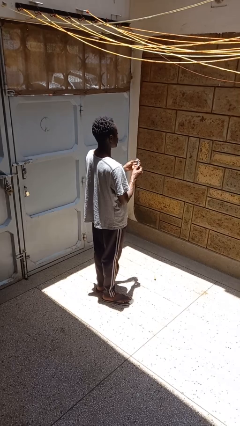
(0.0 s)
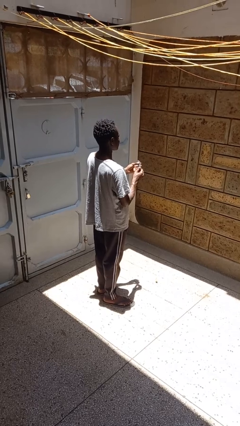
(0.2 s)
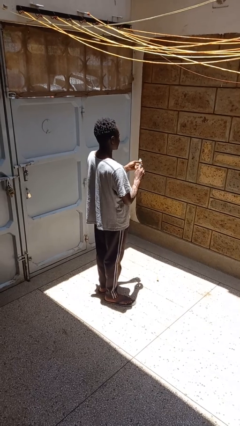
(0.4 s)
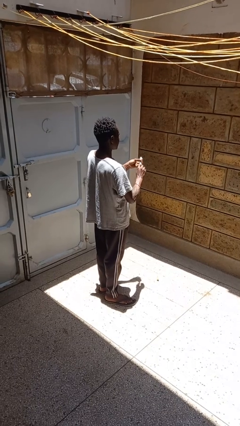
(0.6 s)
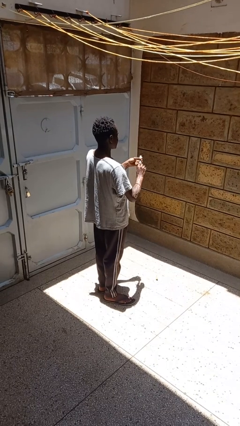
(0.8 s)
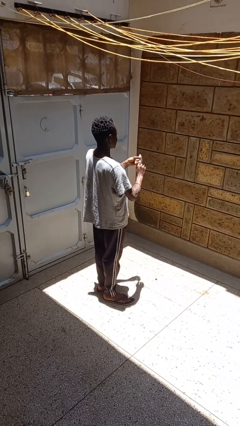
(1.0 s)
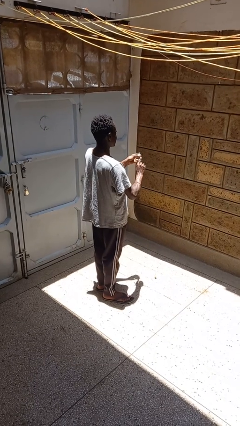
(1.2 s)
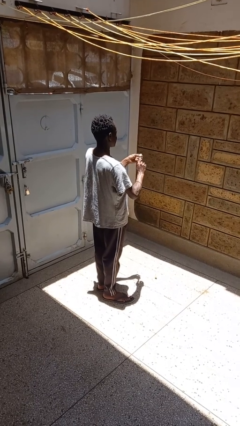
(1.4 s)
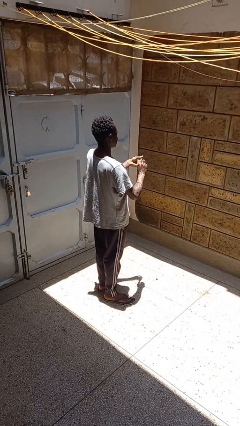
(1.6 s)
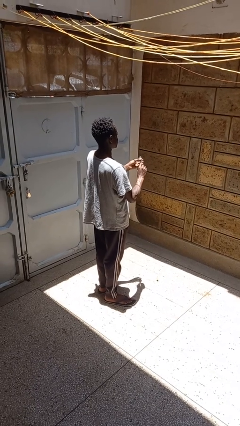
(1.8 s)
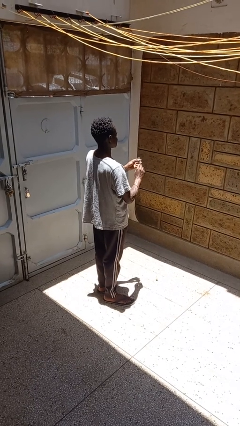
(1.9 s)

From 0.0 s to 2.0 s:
person clips fingernails

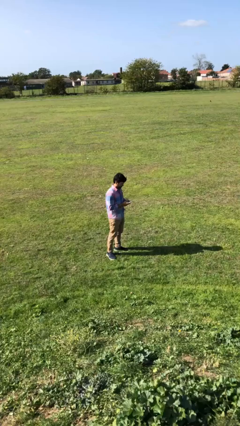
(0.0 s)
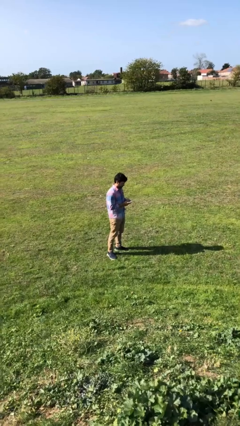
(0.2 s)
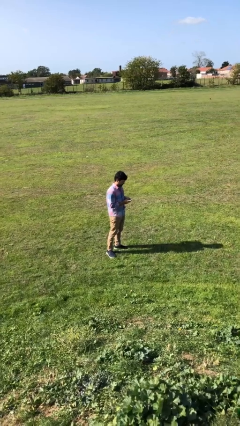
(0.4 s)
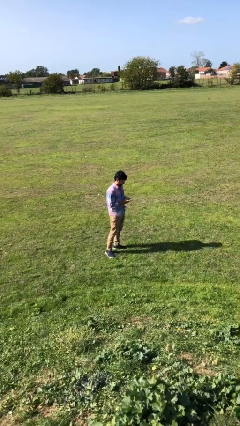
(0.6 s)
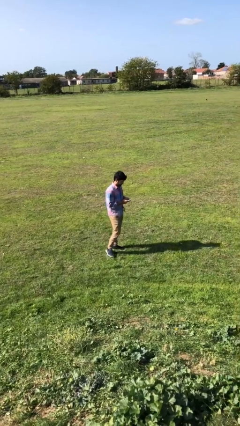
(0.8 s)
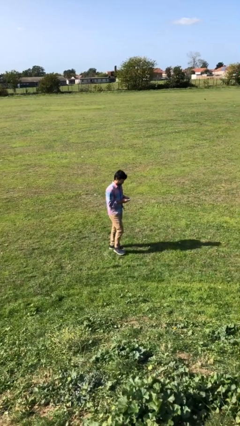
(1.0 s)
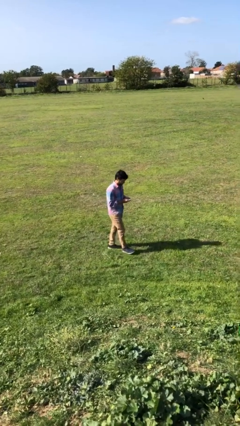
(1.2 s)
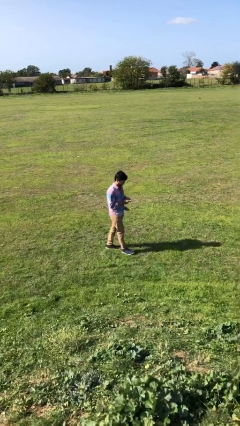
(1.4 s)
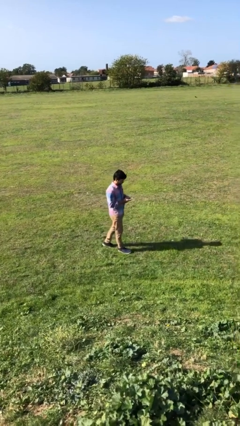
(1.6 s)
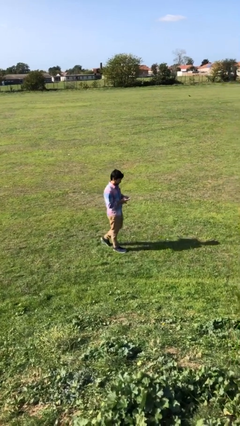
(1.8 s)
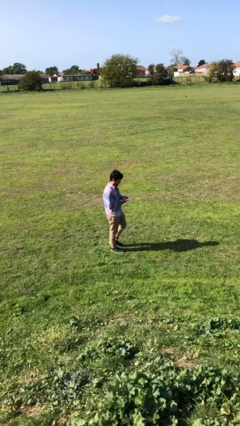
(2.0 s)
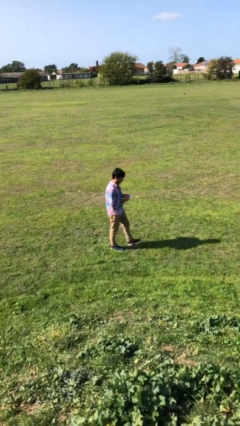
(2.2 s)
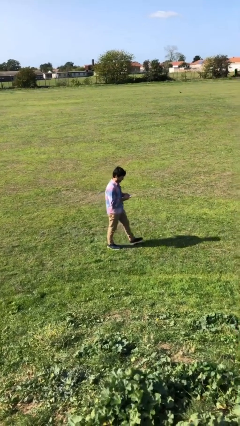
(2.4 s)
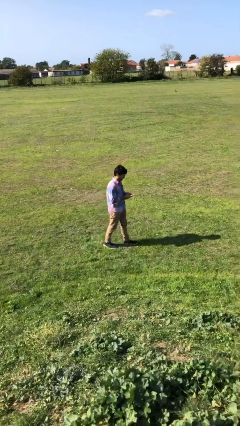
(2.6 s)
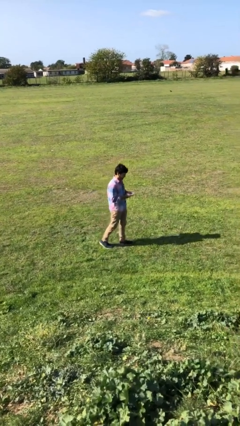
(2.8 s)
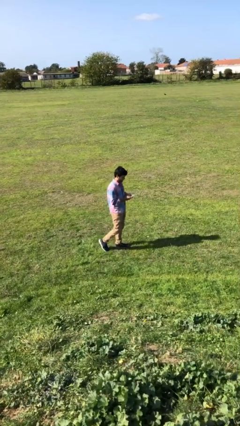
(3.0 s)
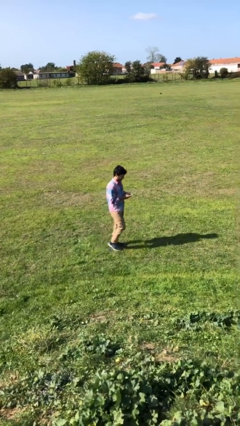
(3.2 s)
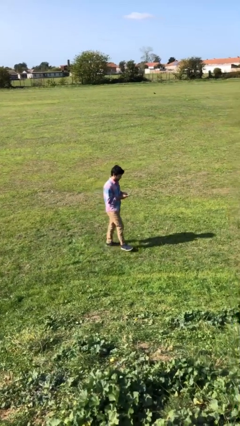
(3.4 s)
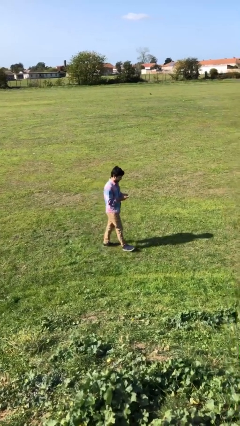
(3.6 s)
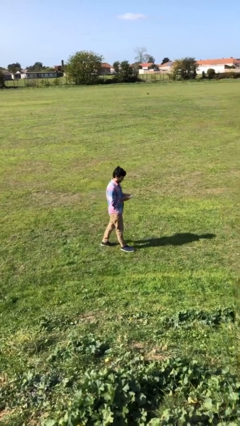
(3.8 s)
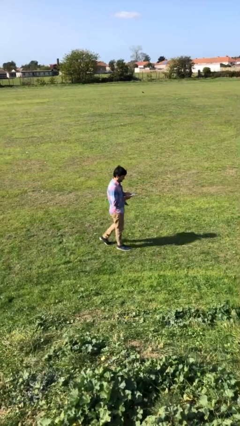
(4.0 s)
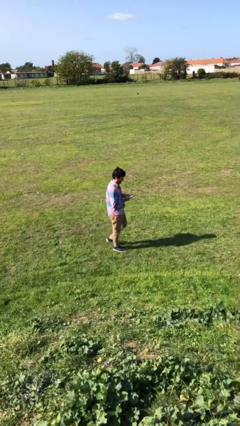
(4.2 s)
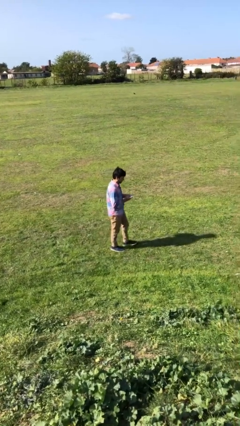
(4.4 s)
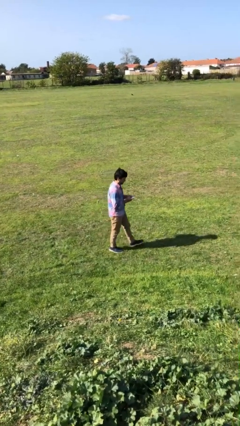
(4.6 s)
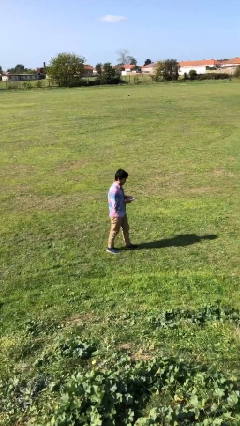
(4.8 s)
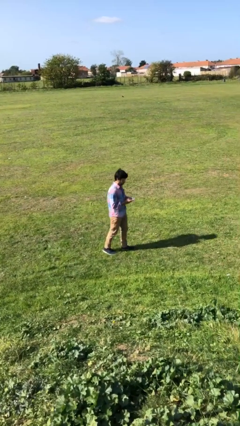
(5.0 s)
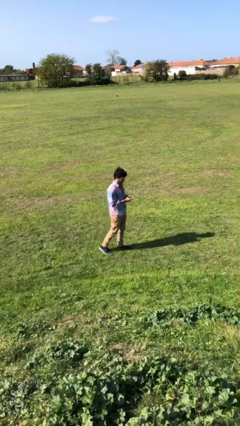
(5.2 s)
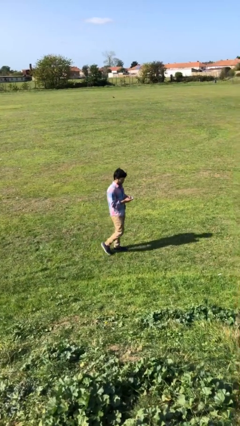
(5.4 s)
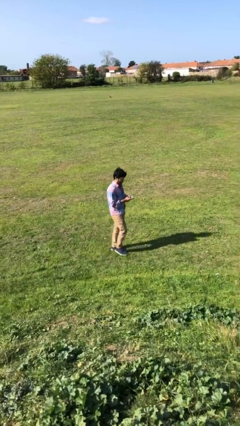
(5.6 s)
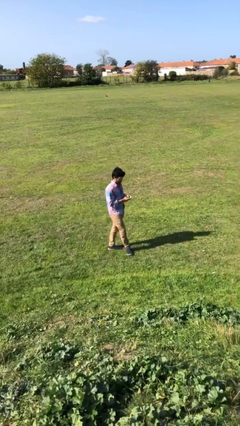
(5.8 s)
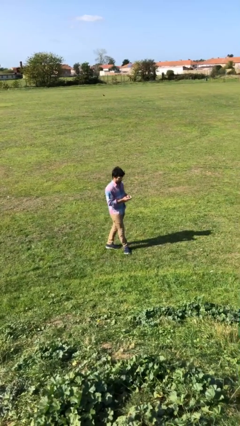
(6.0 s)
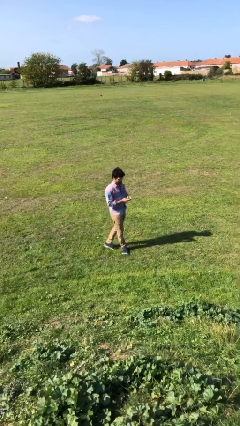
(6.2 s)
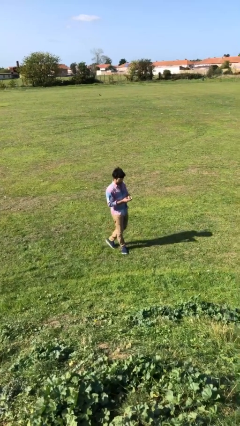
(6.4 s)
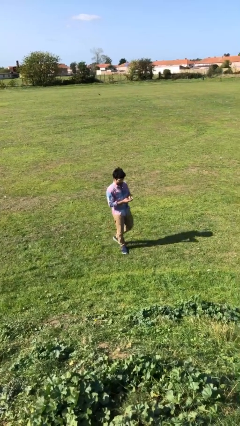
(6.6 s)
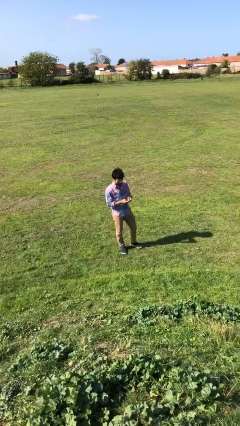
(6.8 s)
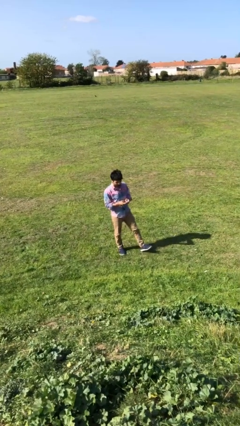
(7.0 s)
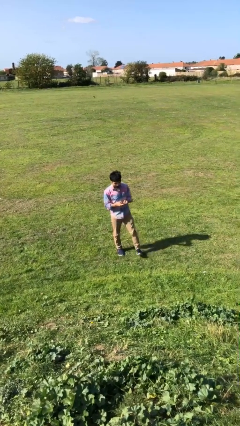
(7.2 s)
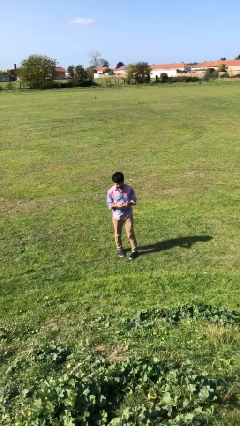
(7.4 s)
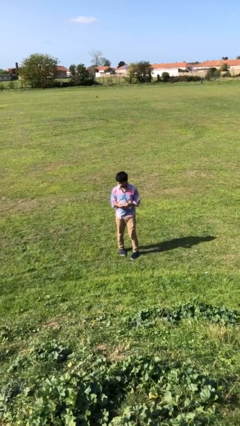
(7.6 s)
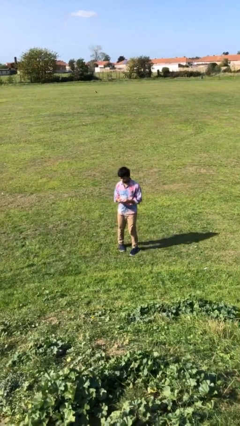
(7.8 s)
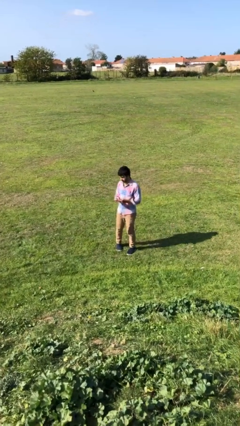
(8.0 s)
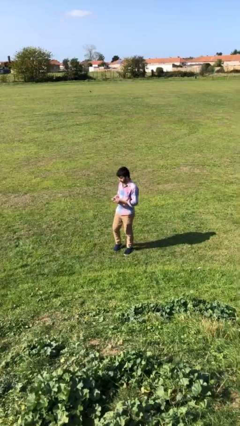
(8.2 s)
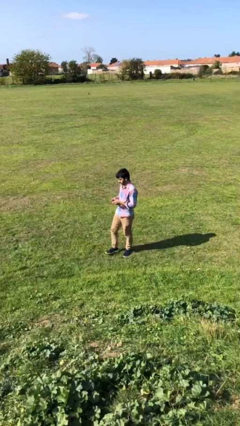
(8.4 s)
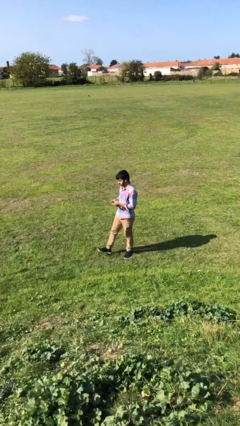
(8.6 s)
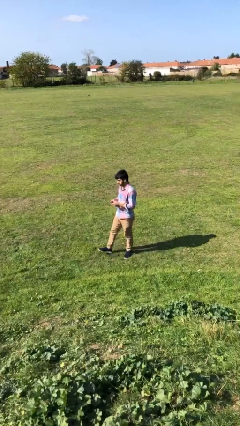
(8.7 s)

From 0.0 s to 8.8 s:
person texts on phone

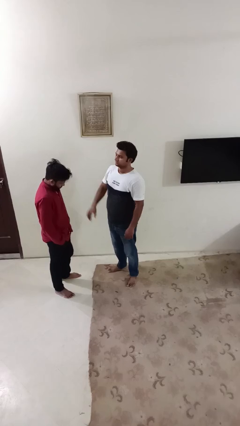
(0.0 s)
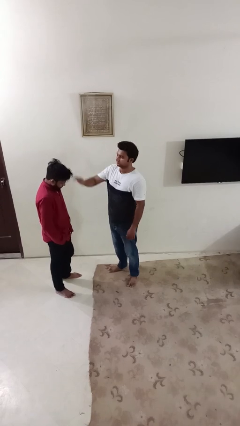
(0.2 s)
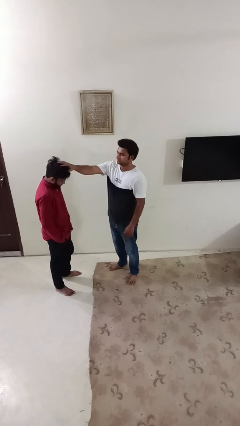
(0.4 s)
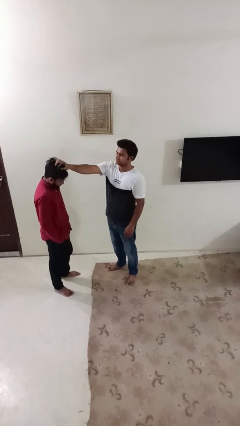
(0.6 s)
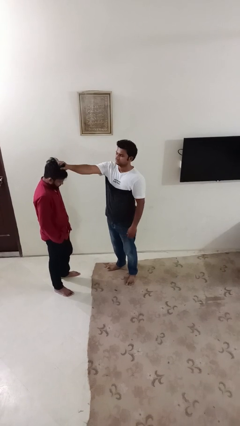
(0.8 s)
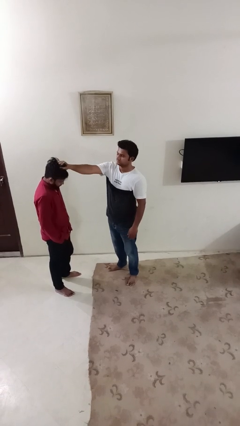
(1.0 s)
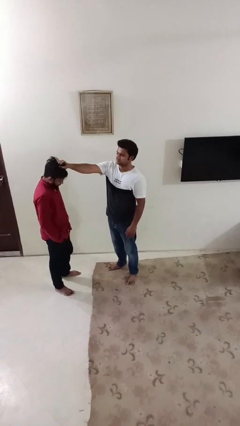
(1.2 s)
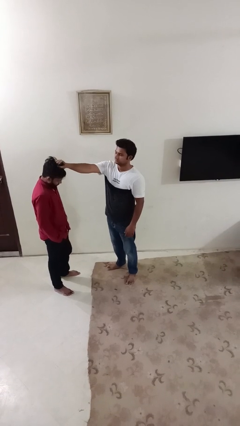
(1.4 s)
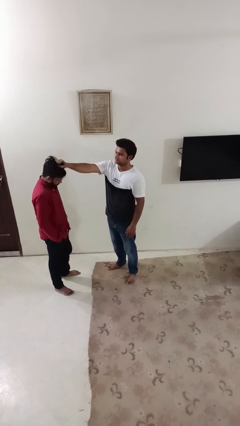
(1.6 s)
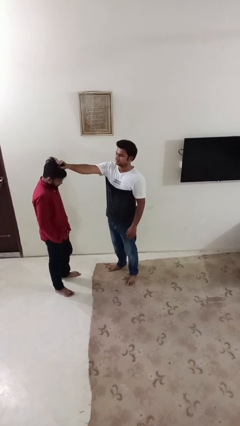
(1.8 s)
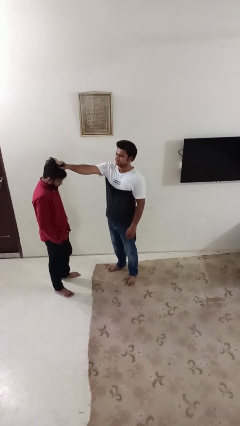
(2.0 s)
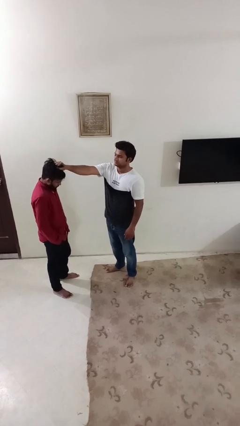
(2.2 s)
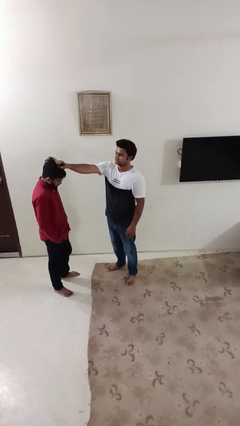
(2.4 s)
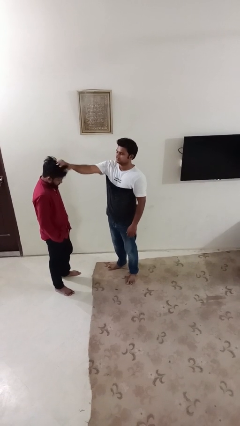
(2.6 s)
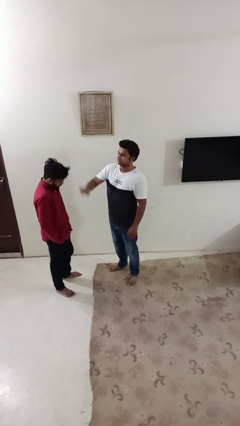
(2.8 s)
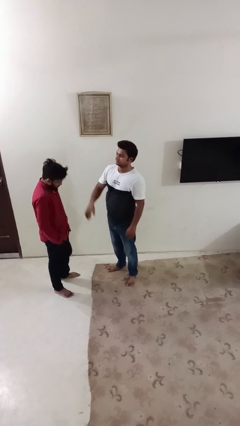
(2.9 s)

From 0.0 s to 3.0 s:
person grabs person by hair

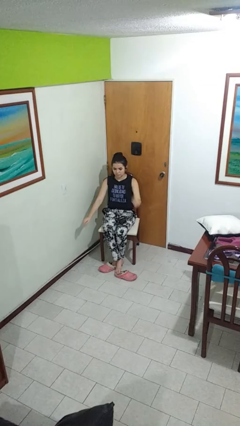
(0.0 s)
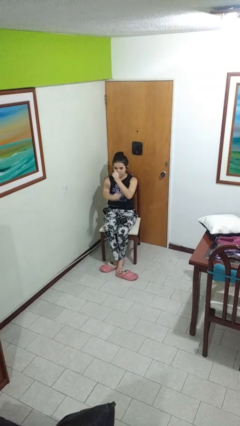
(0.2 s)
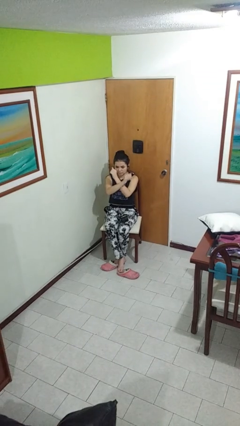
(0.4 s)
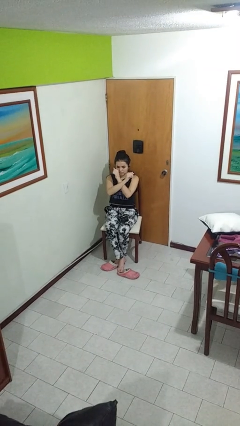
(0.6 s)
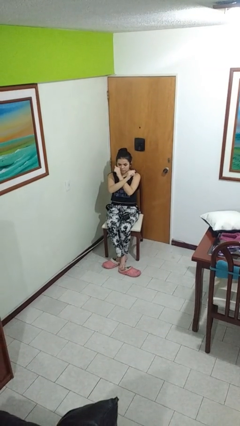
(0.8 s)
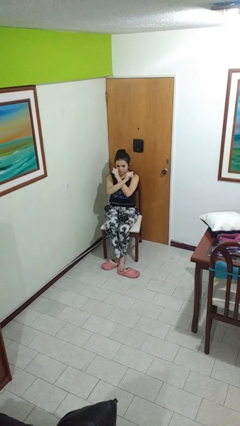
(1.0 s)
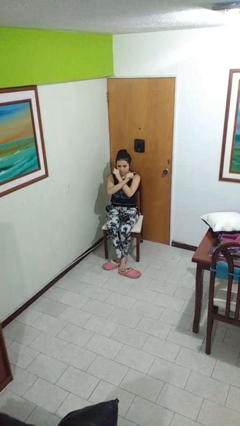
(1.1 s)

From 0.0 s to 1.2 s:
person gestures arms x

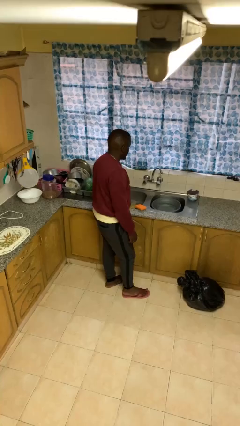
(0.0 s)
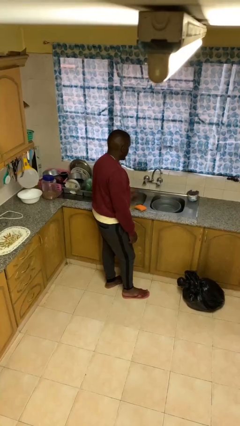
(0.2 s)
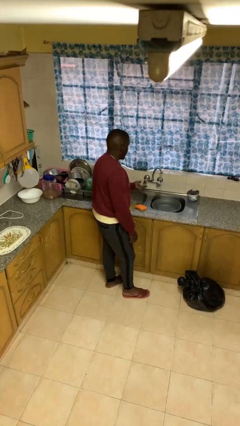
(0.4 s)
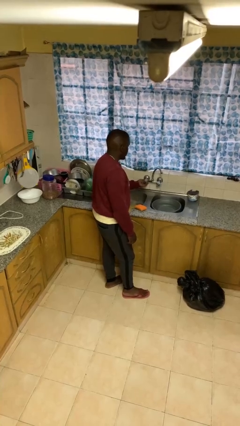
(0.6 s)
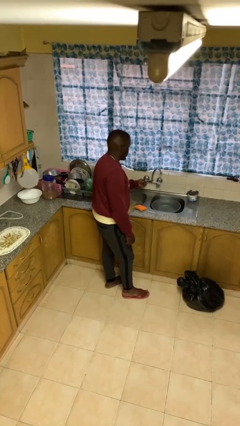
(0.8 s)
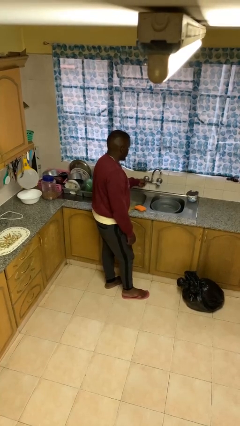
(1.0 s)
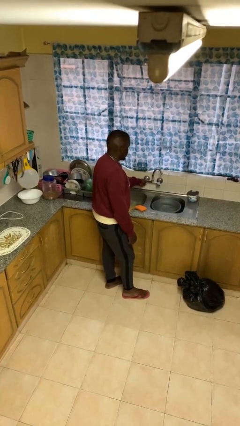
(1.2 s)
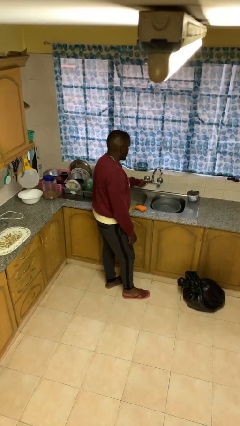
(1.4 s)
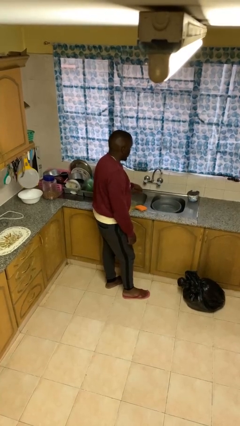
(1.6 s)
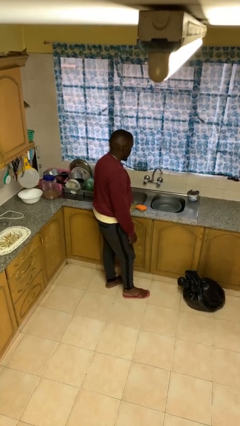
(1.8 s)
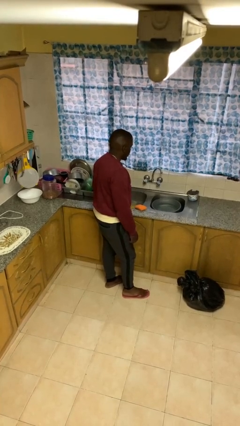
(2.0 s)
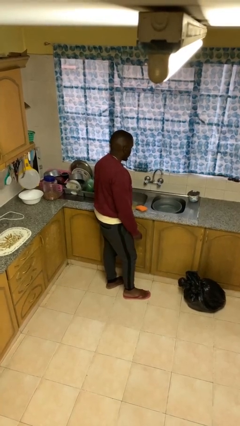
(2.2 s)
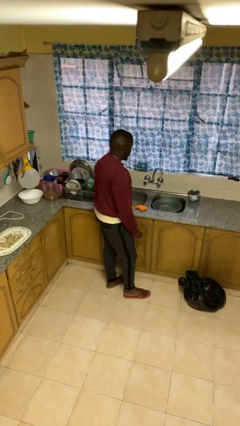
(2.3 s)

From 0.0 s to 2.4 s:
person turns off faucet

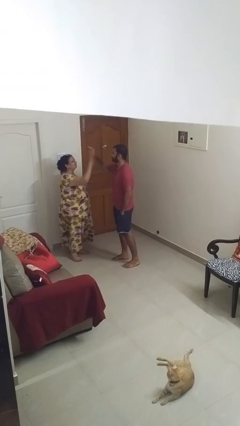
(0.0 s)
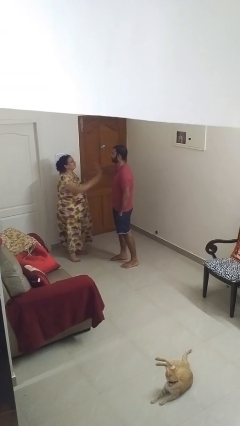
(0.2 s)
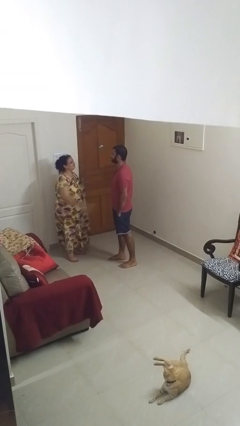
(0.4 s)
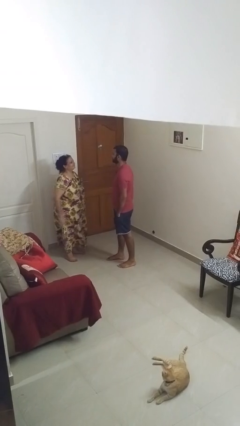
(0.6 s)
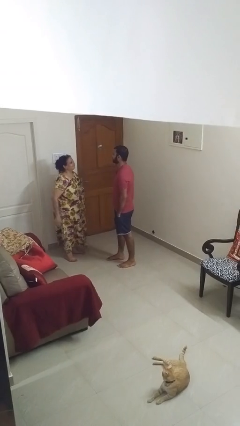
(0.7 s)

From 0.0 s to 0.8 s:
person highfives hand
